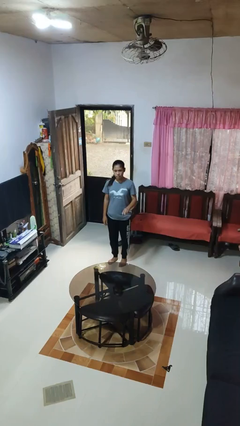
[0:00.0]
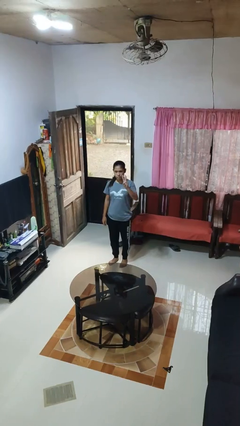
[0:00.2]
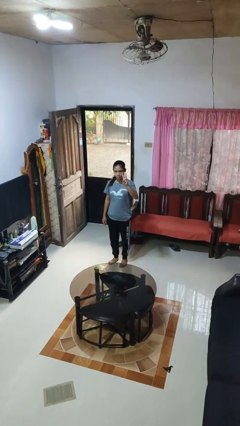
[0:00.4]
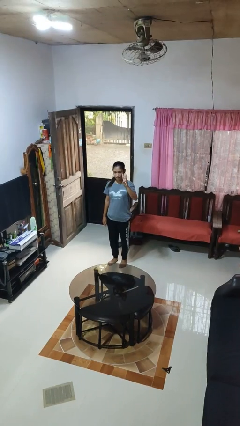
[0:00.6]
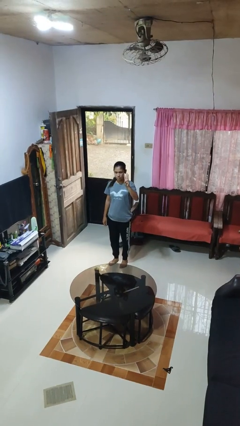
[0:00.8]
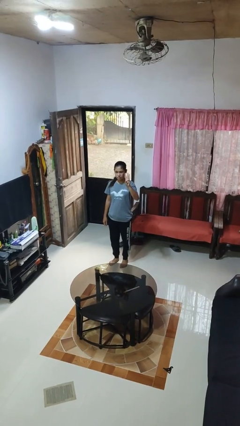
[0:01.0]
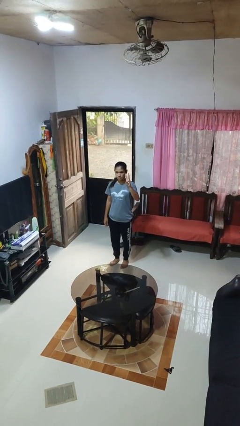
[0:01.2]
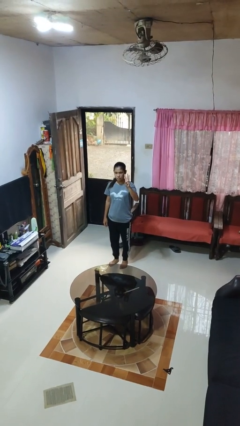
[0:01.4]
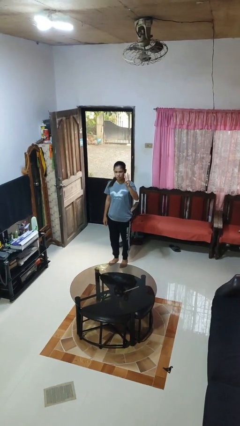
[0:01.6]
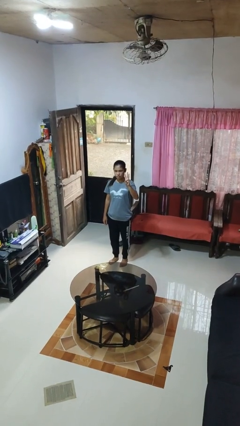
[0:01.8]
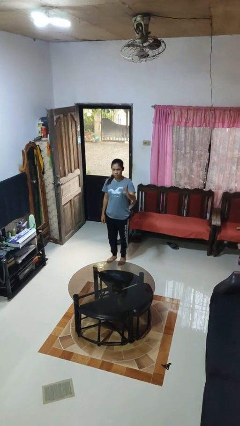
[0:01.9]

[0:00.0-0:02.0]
person gestures number three

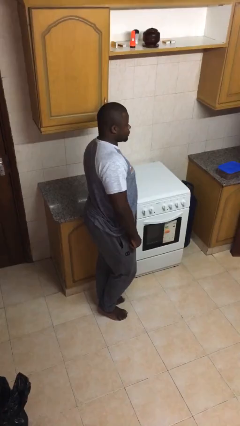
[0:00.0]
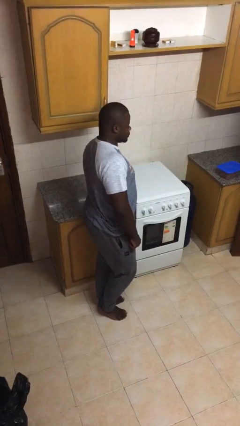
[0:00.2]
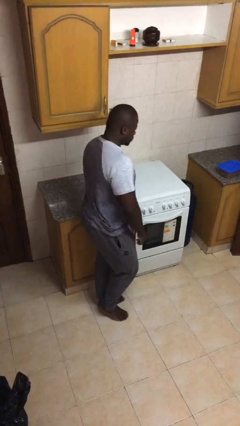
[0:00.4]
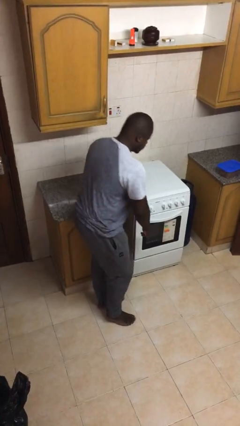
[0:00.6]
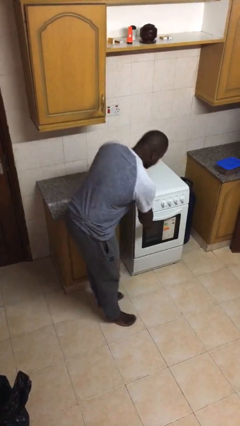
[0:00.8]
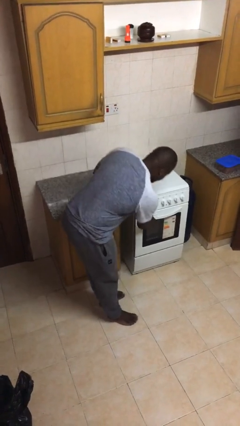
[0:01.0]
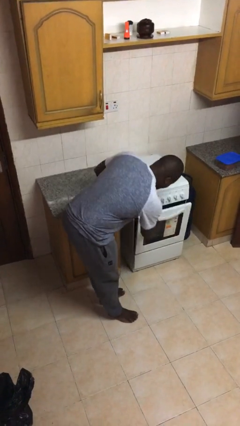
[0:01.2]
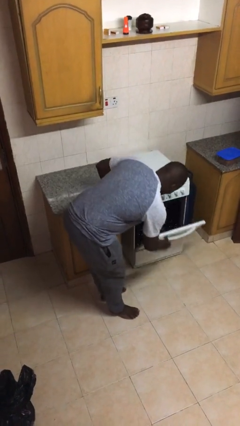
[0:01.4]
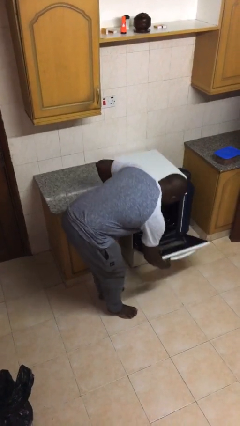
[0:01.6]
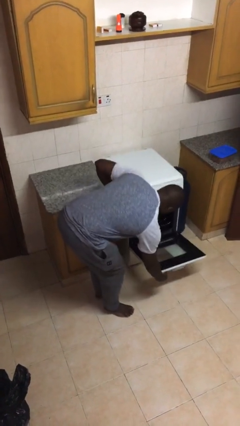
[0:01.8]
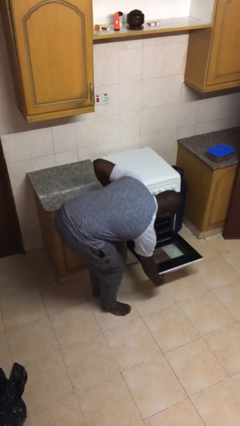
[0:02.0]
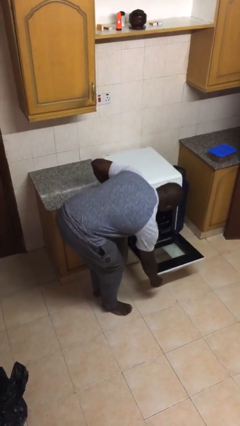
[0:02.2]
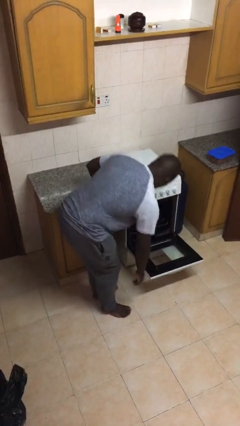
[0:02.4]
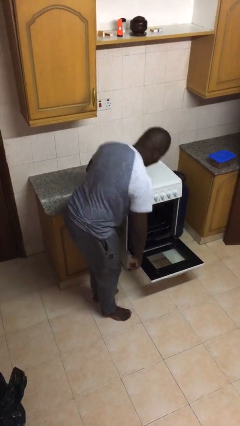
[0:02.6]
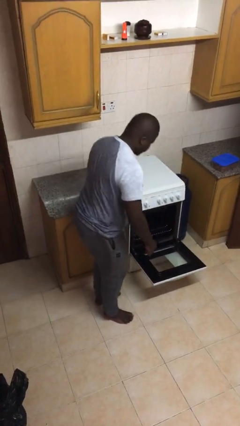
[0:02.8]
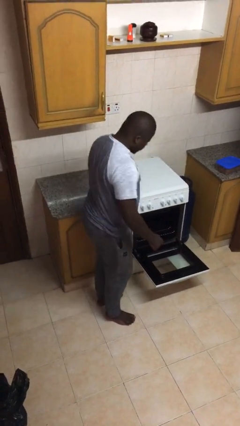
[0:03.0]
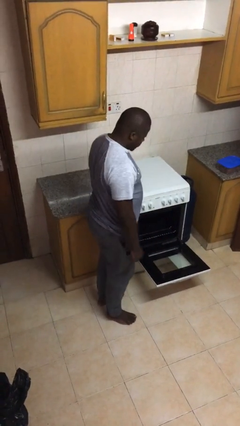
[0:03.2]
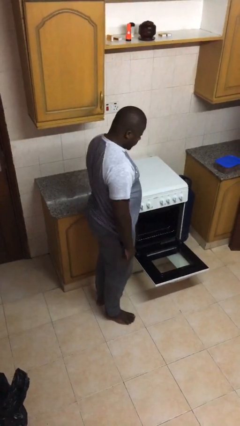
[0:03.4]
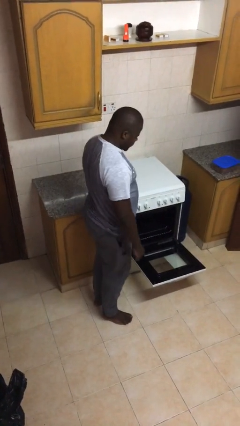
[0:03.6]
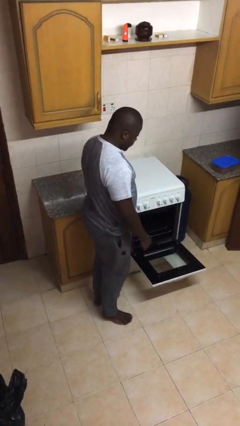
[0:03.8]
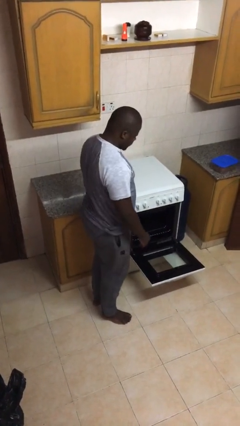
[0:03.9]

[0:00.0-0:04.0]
person opens oven door

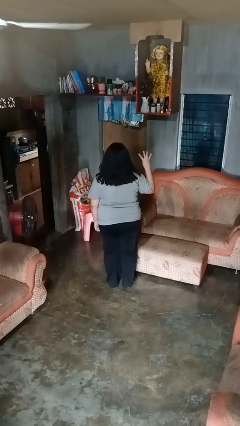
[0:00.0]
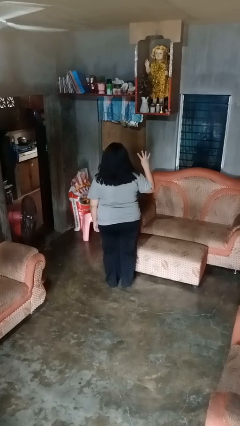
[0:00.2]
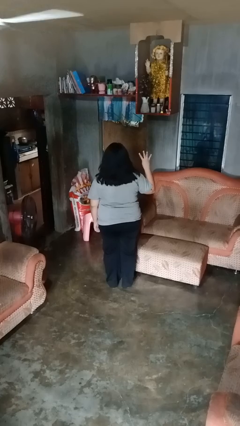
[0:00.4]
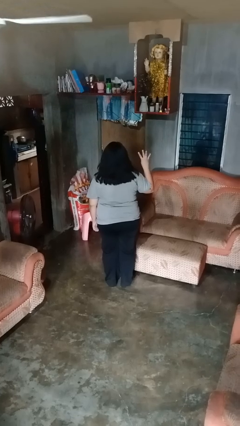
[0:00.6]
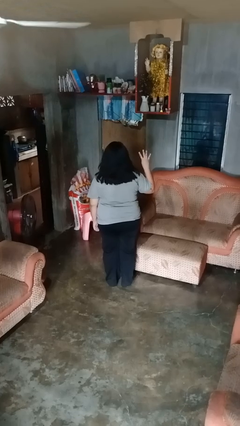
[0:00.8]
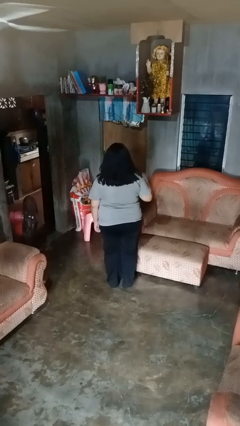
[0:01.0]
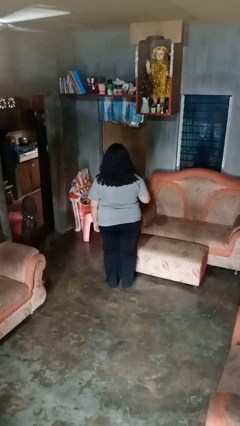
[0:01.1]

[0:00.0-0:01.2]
person gestures number four

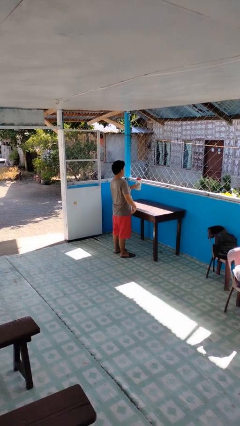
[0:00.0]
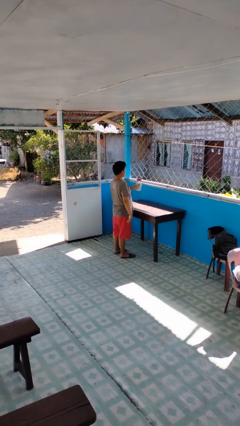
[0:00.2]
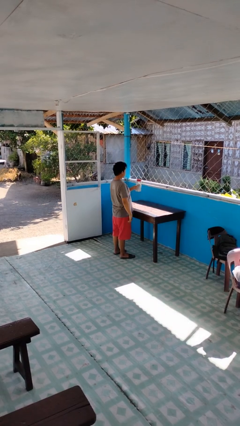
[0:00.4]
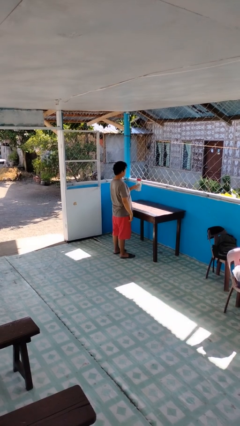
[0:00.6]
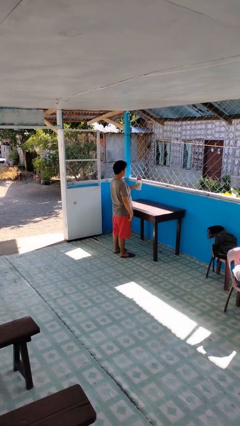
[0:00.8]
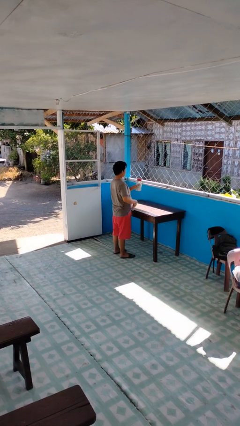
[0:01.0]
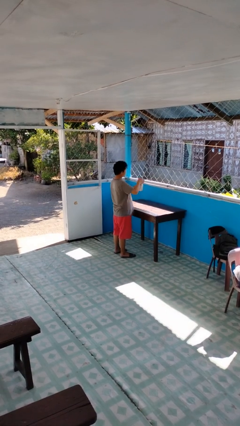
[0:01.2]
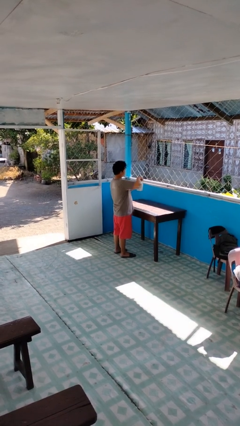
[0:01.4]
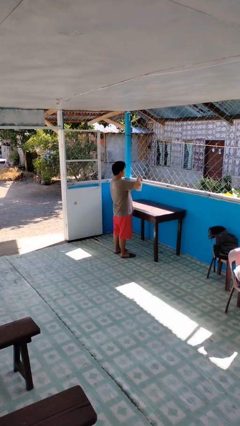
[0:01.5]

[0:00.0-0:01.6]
person opens jar

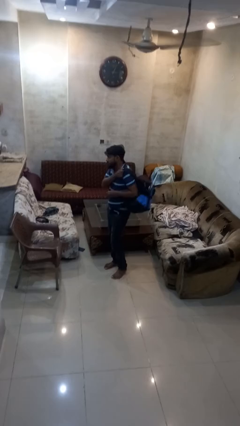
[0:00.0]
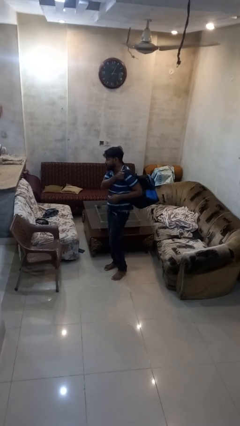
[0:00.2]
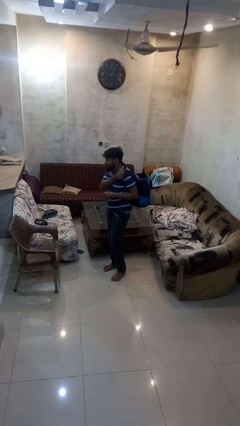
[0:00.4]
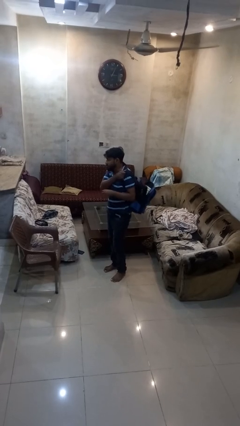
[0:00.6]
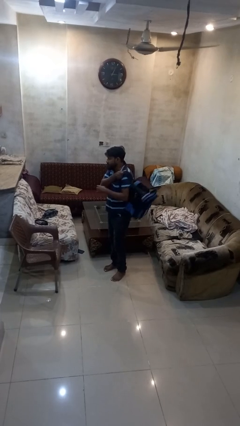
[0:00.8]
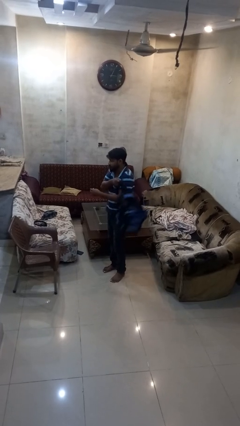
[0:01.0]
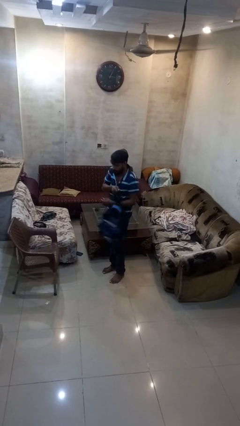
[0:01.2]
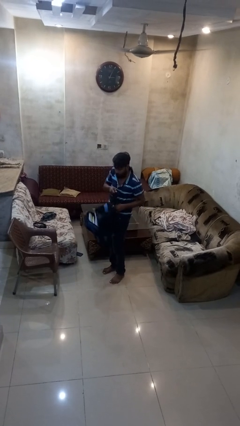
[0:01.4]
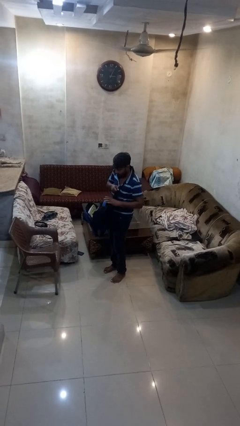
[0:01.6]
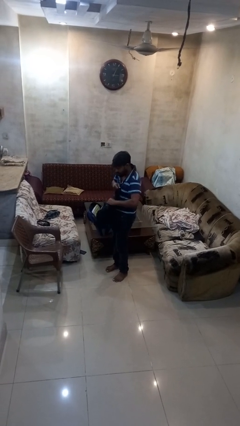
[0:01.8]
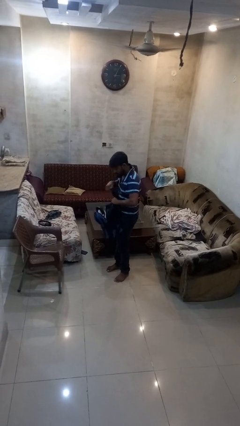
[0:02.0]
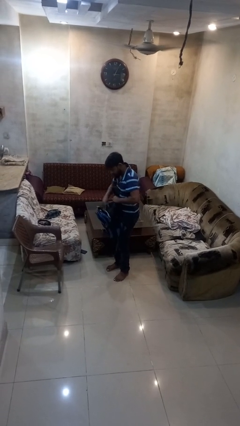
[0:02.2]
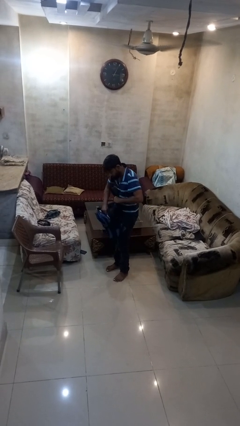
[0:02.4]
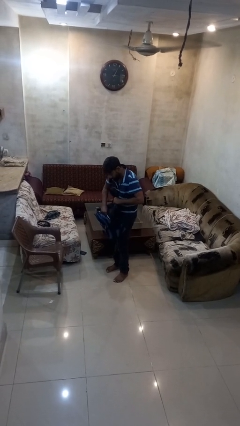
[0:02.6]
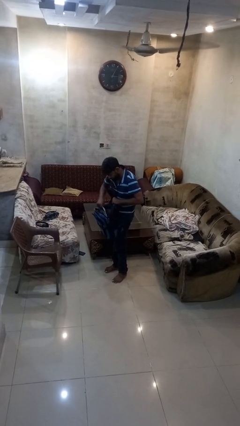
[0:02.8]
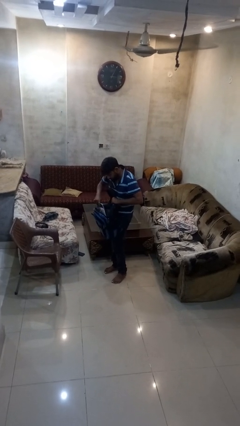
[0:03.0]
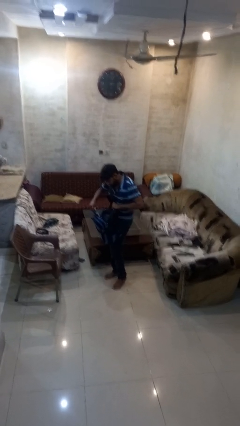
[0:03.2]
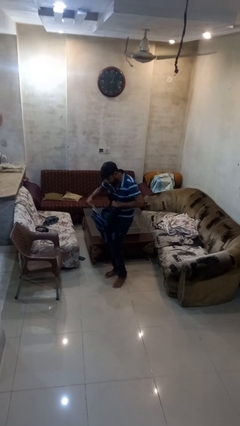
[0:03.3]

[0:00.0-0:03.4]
person searches in backpack

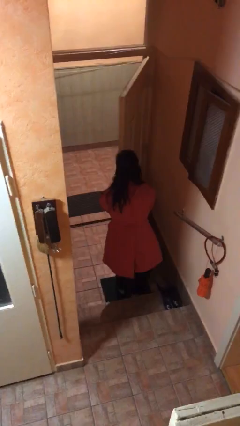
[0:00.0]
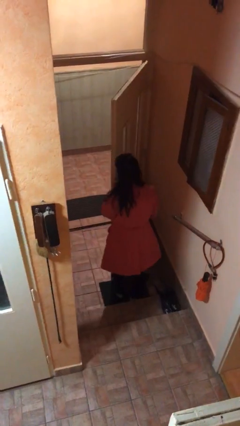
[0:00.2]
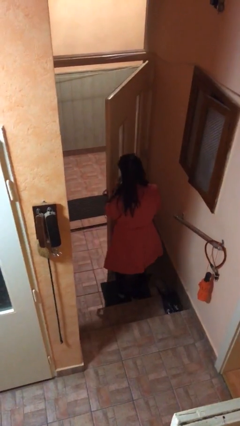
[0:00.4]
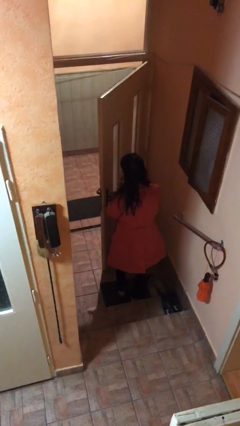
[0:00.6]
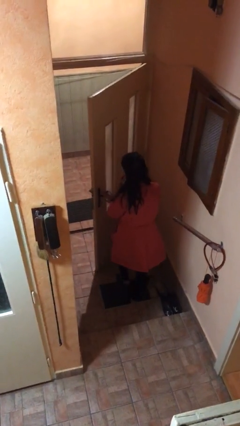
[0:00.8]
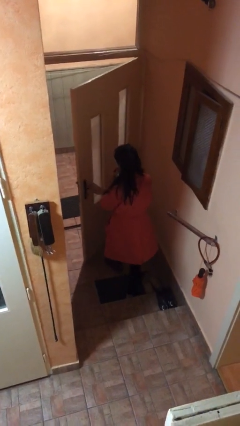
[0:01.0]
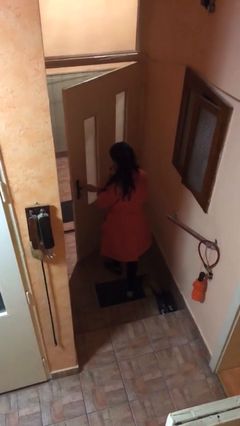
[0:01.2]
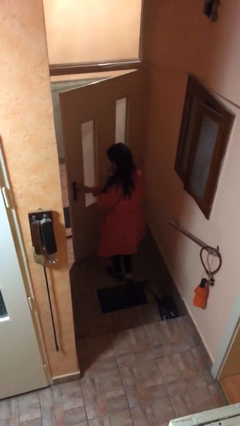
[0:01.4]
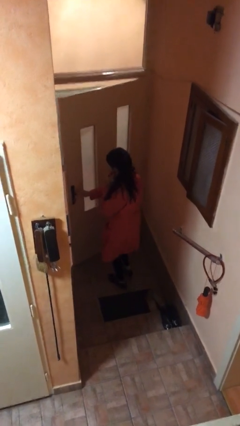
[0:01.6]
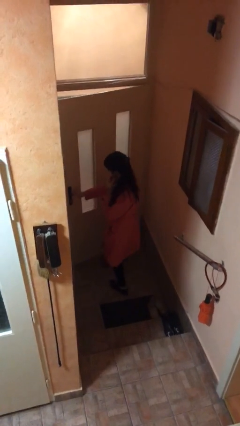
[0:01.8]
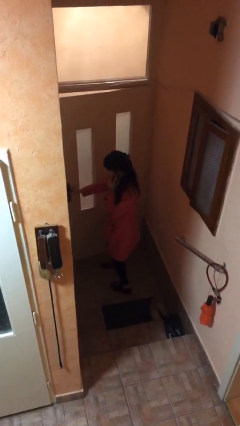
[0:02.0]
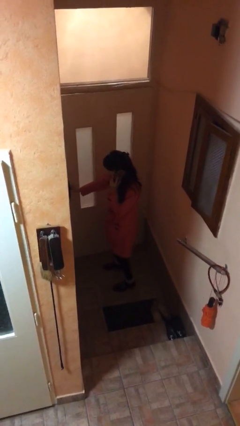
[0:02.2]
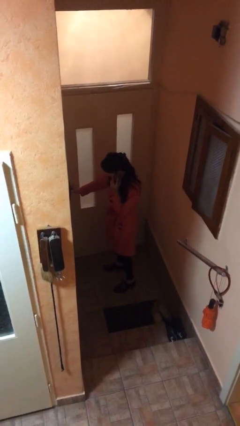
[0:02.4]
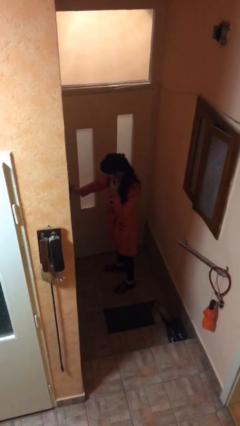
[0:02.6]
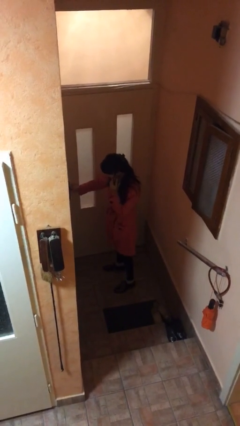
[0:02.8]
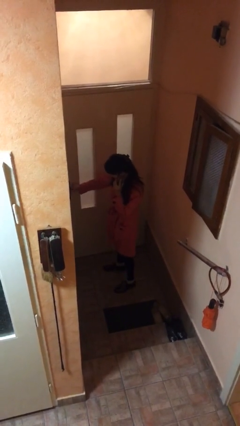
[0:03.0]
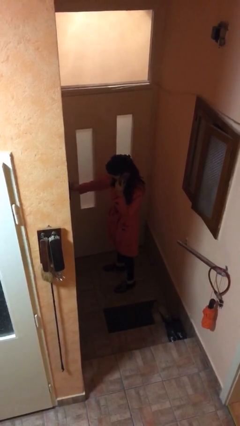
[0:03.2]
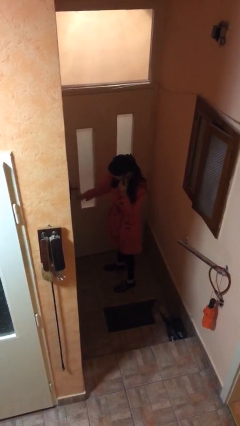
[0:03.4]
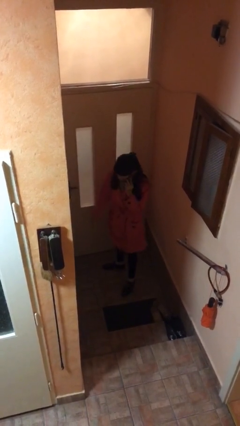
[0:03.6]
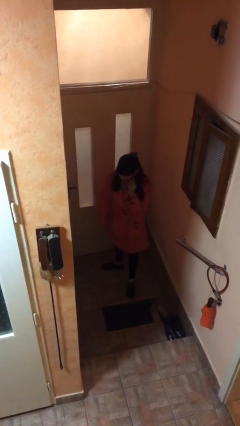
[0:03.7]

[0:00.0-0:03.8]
person closes facility door

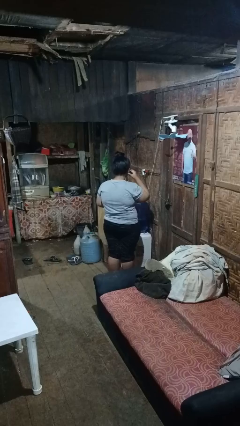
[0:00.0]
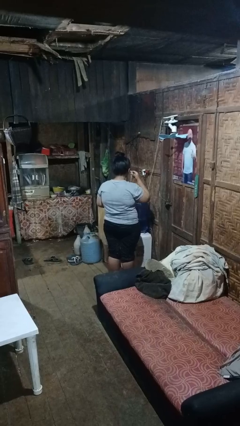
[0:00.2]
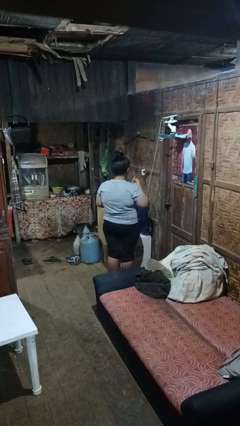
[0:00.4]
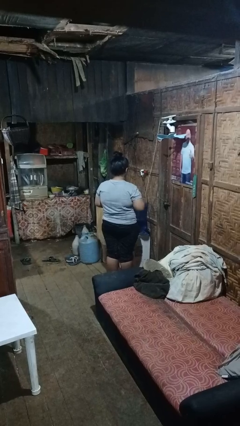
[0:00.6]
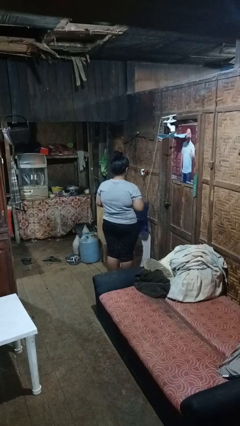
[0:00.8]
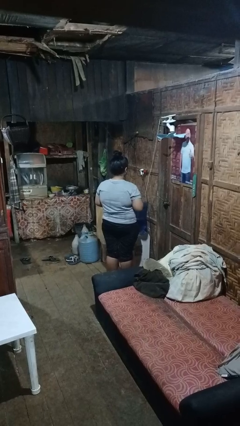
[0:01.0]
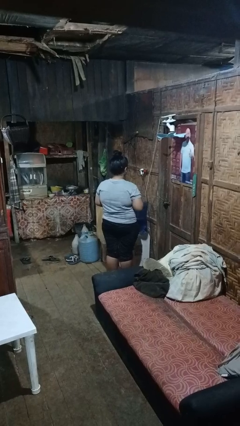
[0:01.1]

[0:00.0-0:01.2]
person takes off headphones
